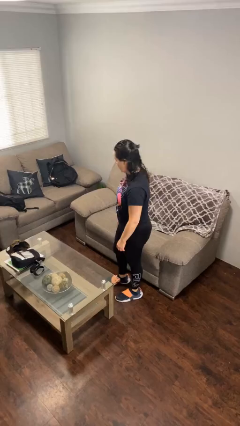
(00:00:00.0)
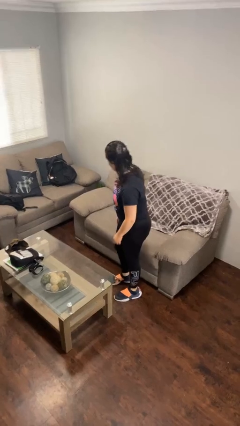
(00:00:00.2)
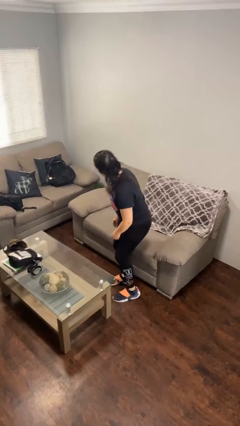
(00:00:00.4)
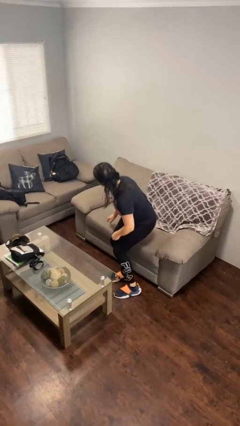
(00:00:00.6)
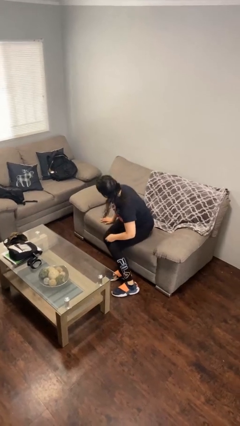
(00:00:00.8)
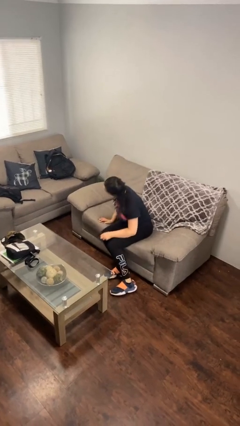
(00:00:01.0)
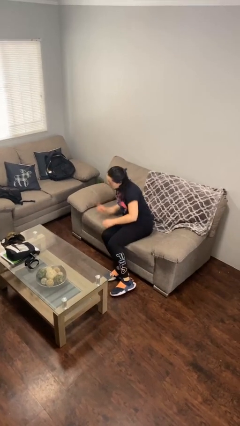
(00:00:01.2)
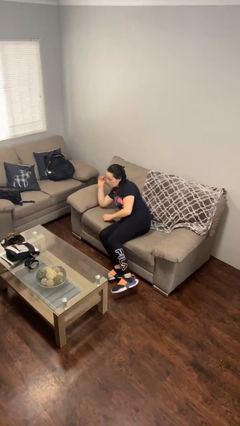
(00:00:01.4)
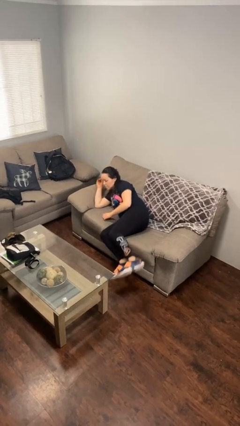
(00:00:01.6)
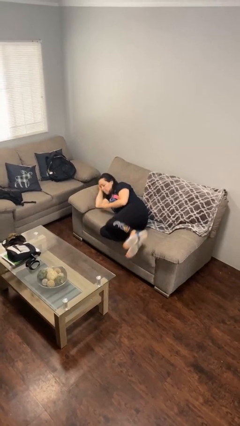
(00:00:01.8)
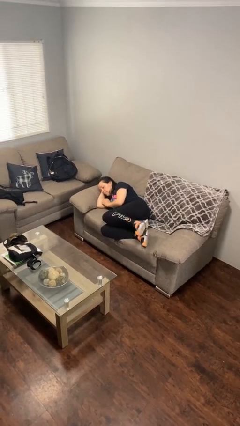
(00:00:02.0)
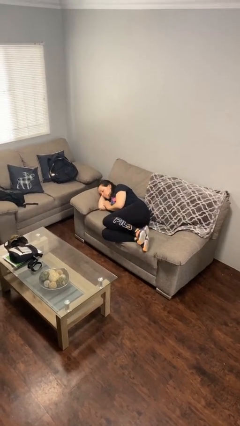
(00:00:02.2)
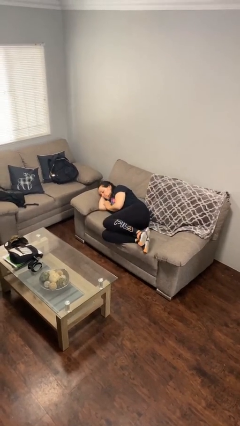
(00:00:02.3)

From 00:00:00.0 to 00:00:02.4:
person lies down on couch

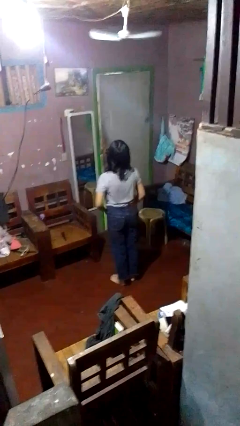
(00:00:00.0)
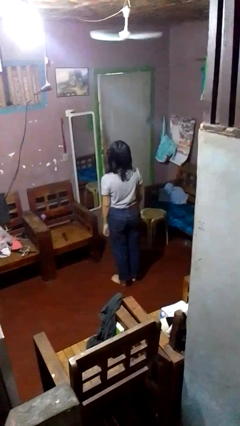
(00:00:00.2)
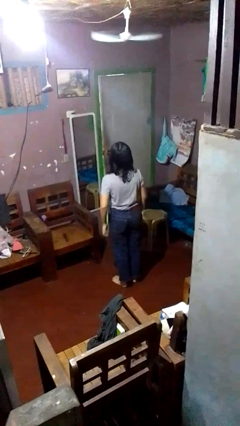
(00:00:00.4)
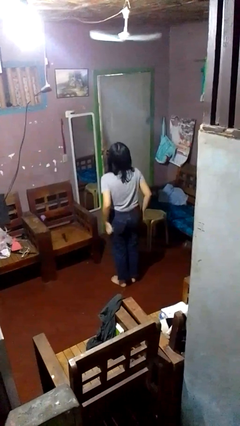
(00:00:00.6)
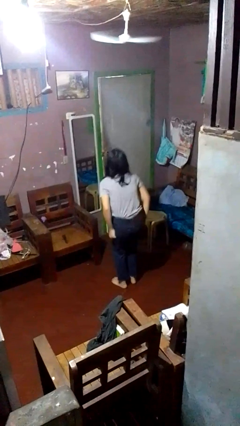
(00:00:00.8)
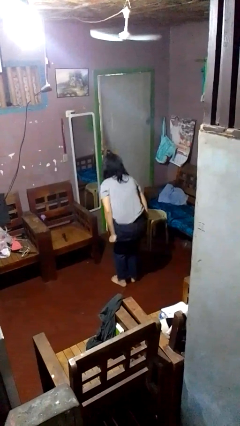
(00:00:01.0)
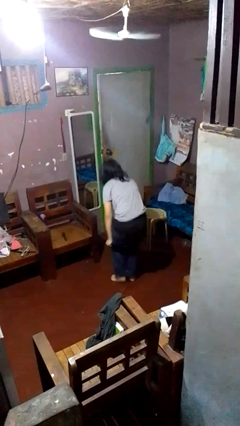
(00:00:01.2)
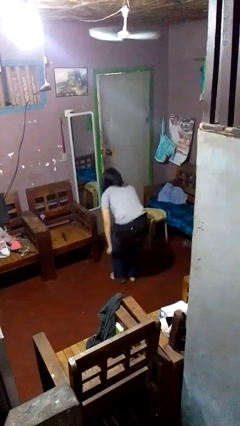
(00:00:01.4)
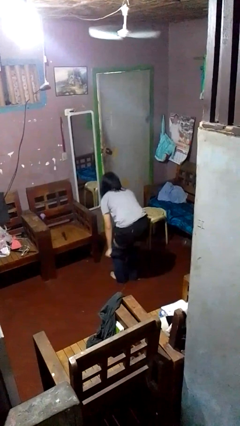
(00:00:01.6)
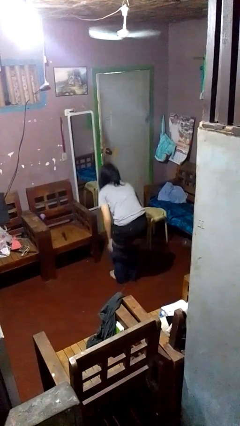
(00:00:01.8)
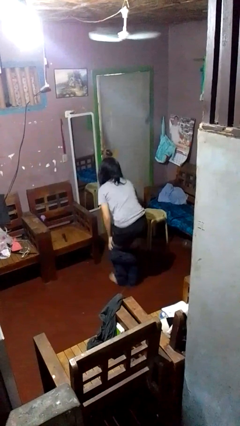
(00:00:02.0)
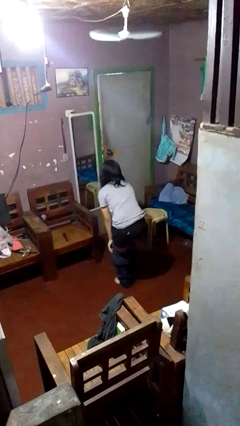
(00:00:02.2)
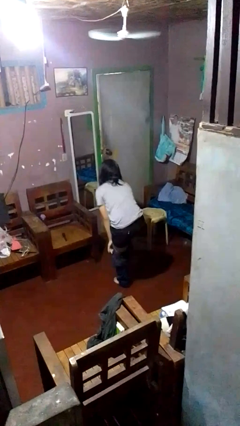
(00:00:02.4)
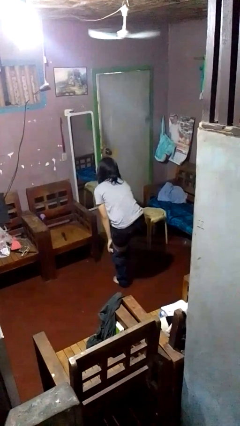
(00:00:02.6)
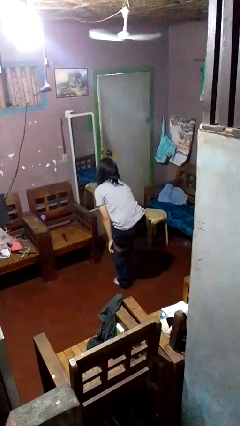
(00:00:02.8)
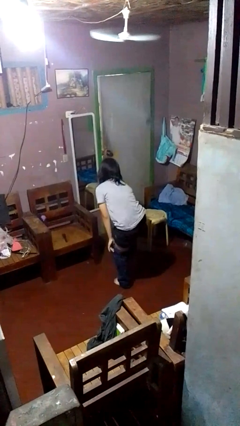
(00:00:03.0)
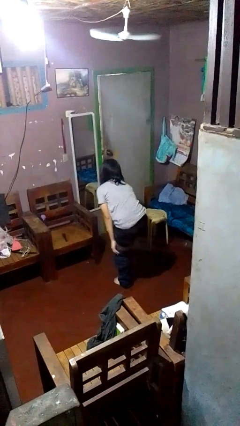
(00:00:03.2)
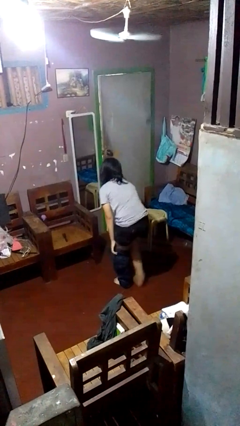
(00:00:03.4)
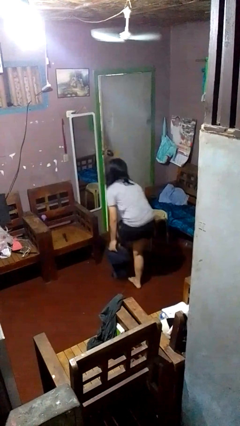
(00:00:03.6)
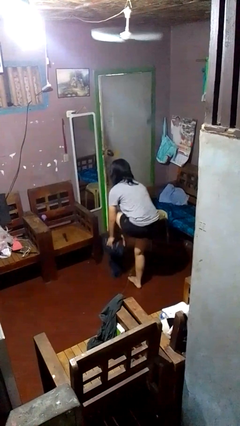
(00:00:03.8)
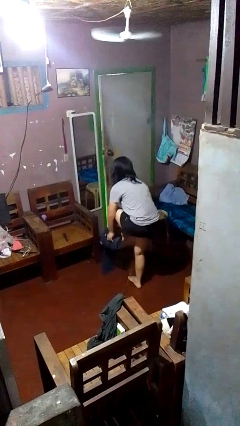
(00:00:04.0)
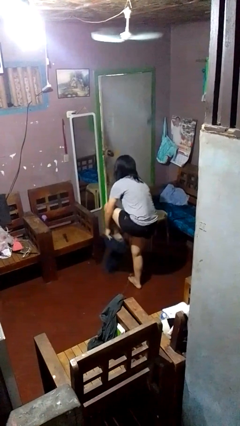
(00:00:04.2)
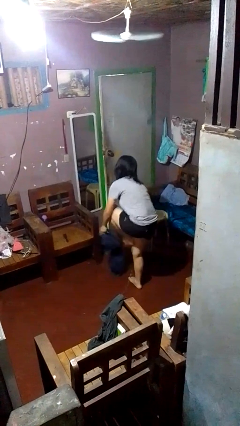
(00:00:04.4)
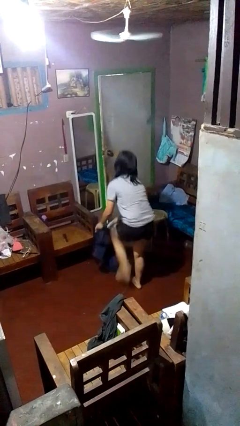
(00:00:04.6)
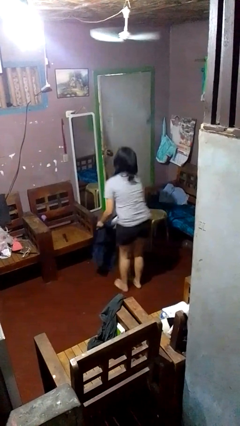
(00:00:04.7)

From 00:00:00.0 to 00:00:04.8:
person takes off pants

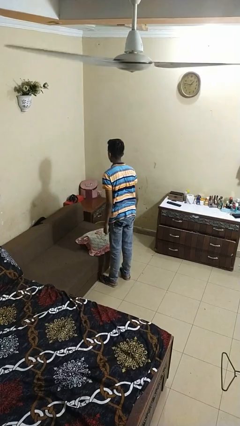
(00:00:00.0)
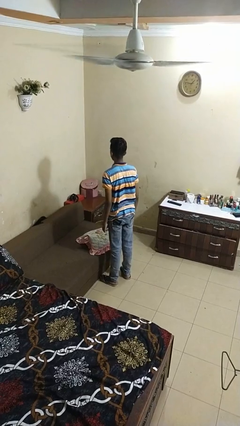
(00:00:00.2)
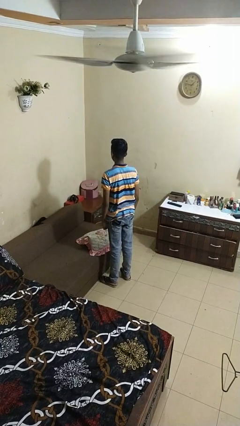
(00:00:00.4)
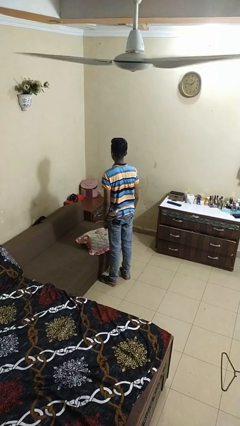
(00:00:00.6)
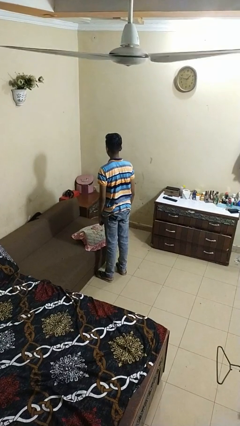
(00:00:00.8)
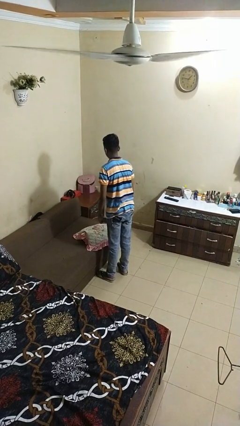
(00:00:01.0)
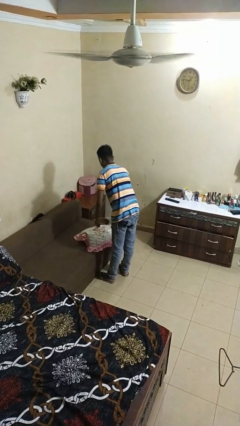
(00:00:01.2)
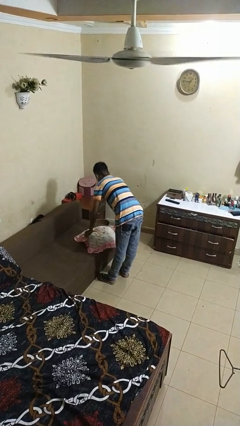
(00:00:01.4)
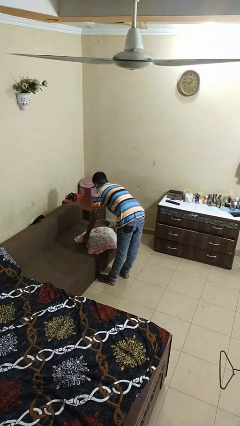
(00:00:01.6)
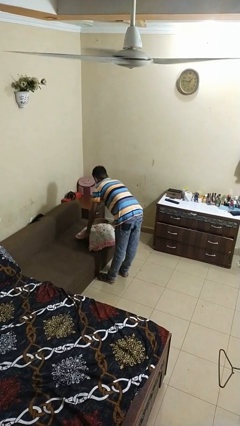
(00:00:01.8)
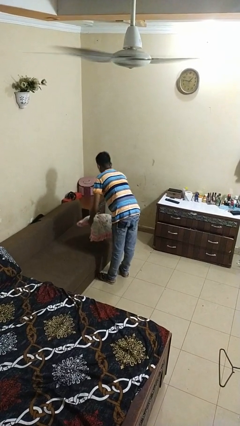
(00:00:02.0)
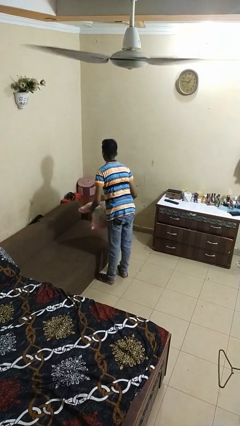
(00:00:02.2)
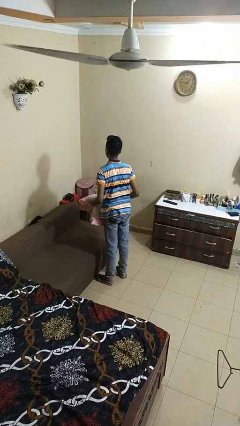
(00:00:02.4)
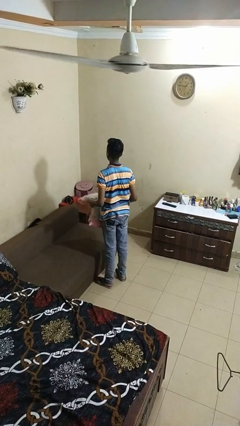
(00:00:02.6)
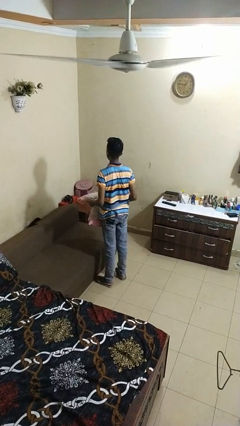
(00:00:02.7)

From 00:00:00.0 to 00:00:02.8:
person picks up object from couch

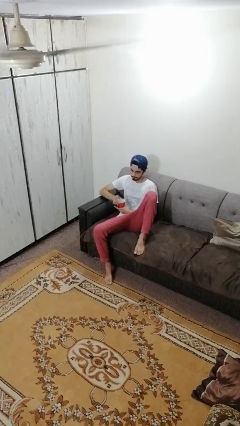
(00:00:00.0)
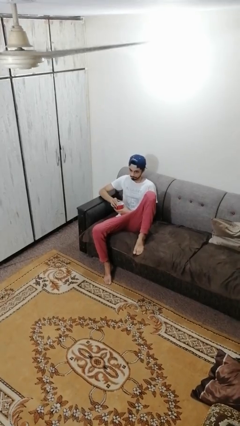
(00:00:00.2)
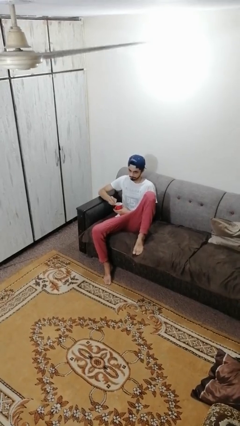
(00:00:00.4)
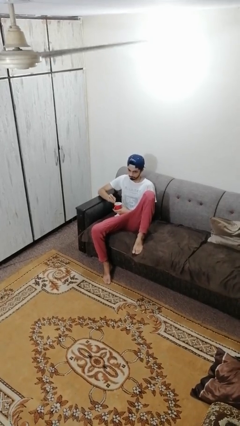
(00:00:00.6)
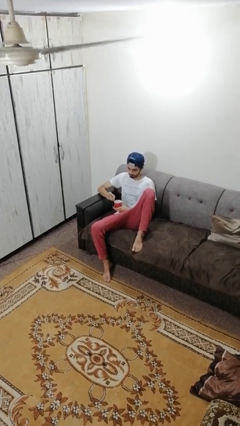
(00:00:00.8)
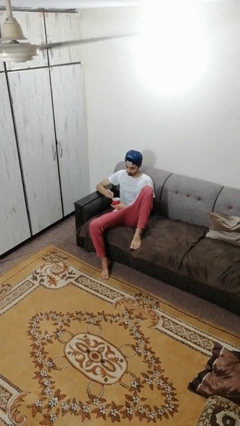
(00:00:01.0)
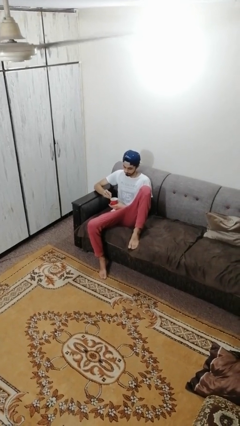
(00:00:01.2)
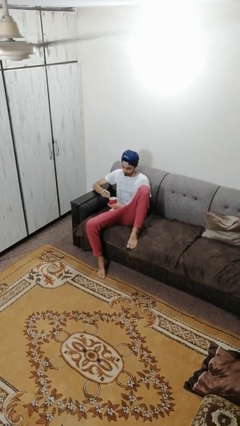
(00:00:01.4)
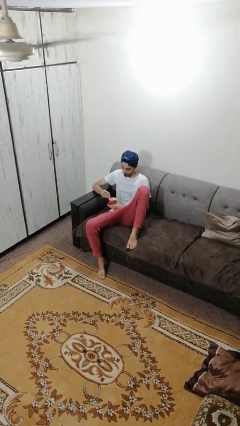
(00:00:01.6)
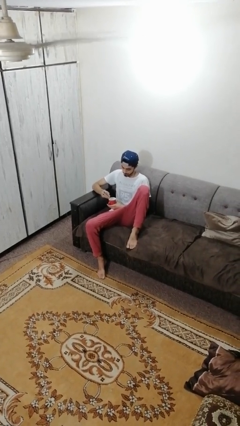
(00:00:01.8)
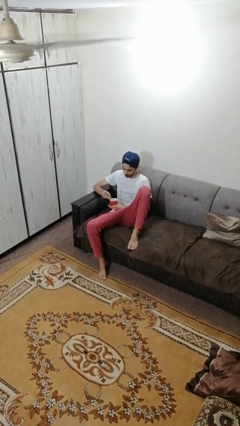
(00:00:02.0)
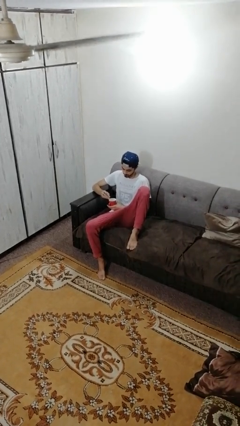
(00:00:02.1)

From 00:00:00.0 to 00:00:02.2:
person stirs mug

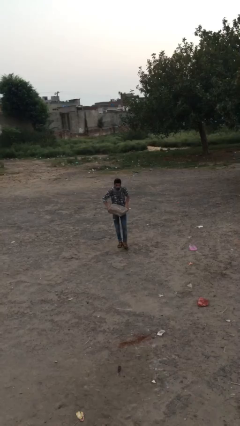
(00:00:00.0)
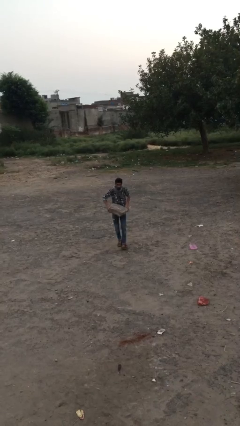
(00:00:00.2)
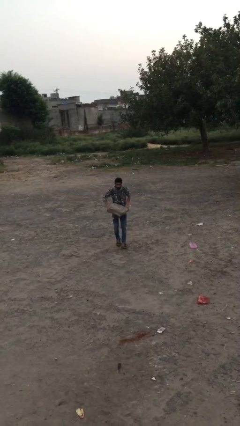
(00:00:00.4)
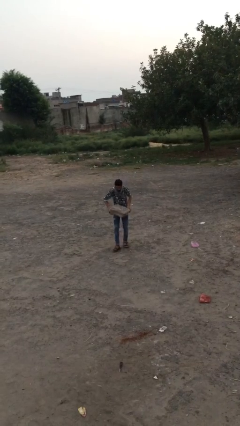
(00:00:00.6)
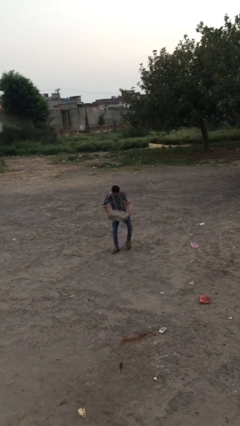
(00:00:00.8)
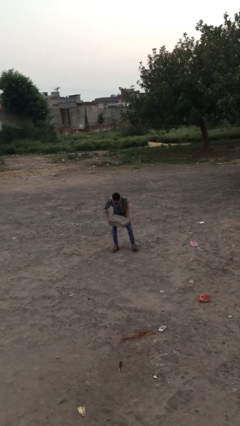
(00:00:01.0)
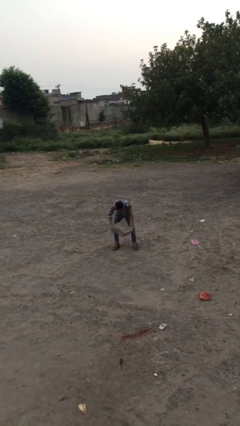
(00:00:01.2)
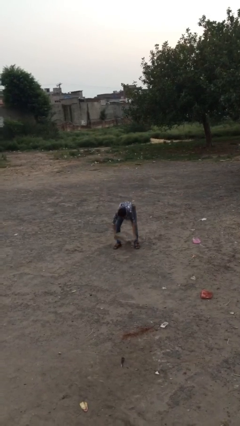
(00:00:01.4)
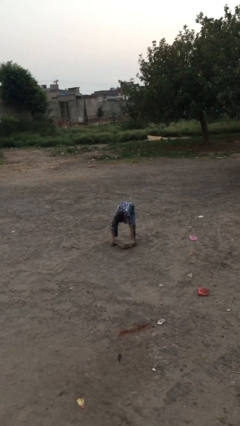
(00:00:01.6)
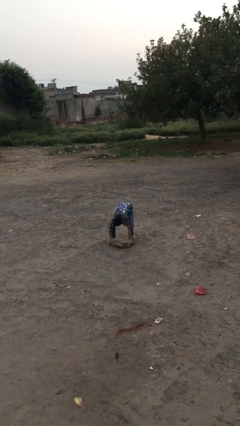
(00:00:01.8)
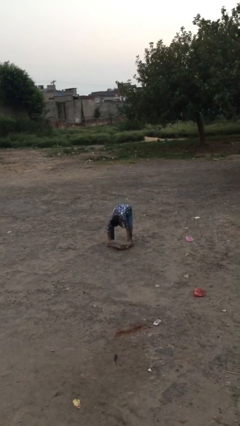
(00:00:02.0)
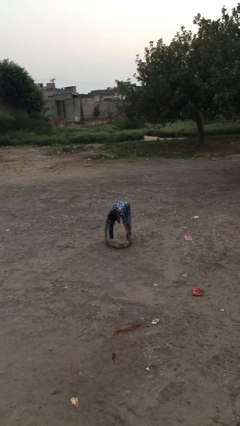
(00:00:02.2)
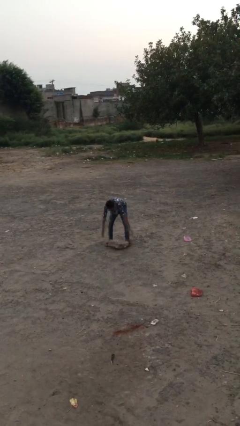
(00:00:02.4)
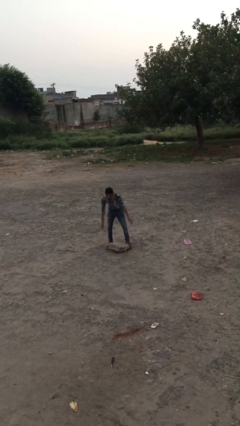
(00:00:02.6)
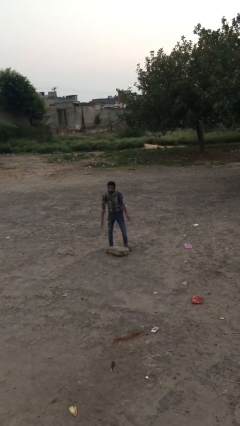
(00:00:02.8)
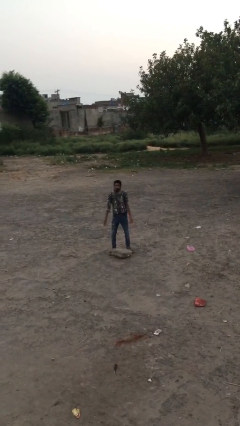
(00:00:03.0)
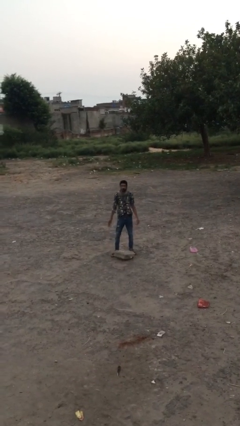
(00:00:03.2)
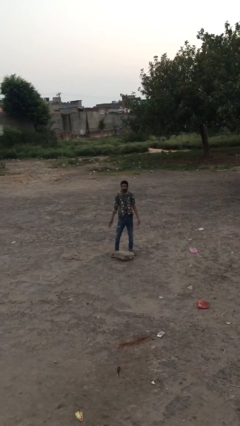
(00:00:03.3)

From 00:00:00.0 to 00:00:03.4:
person puts down object on floor

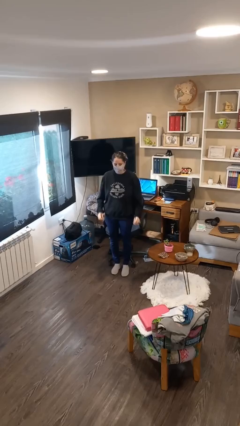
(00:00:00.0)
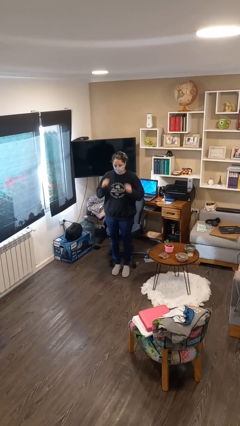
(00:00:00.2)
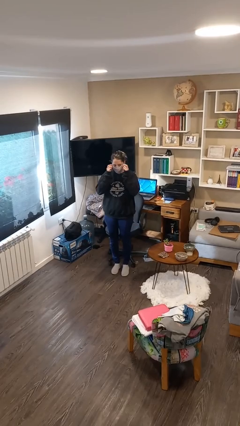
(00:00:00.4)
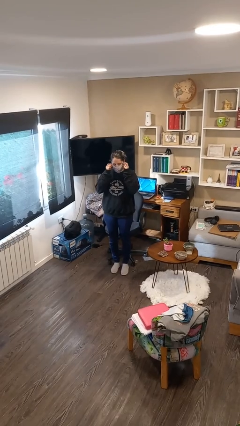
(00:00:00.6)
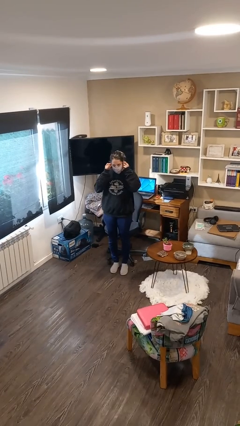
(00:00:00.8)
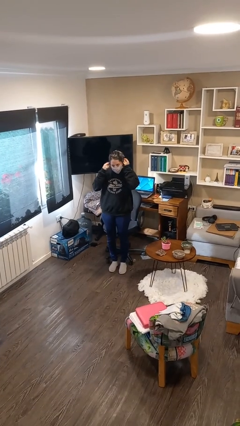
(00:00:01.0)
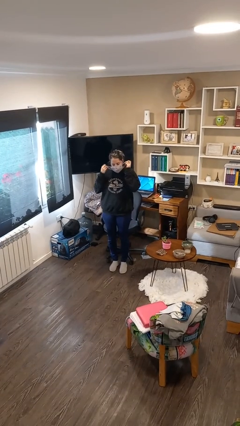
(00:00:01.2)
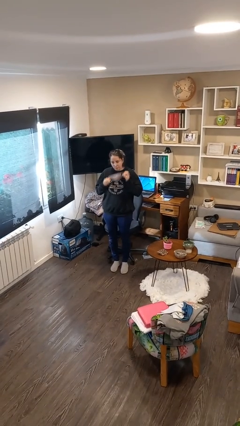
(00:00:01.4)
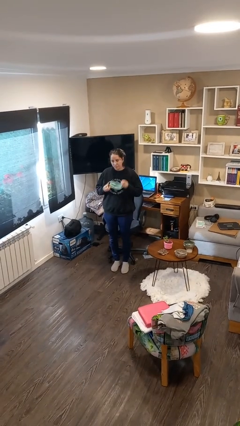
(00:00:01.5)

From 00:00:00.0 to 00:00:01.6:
person takes off facemask
